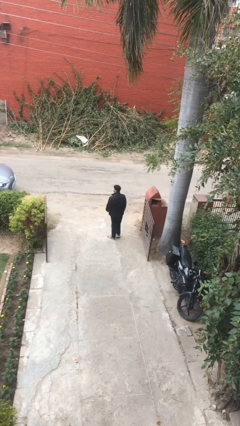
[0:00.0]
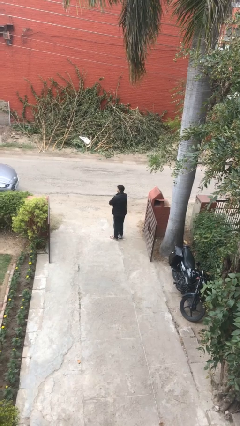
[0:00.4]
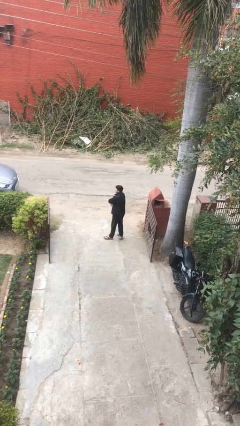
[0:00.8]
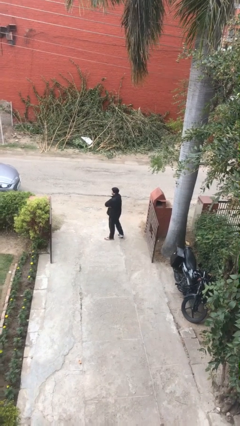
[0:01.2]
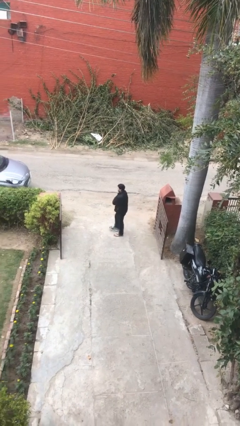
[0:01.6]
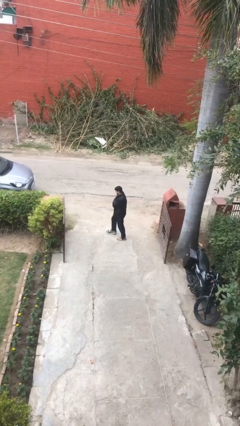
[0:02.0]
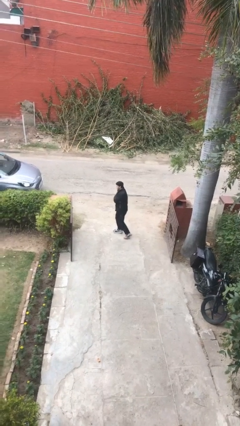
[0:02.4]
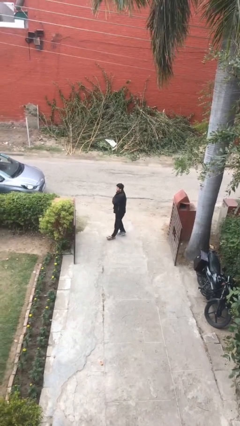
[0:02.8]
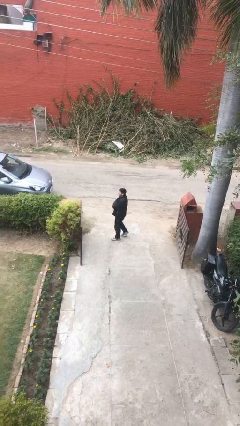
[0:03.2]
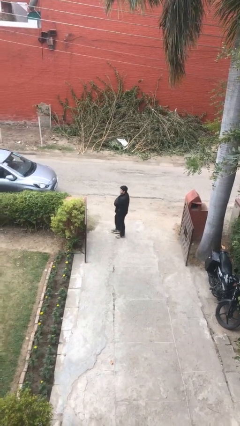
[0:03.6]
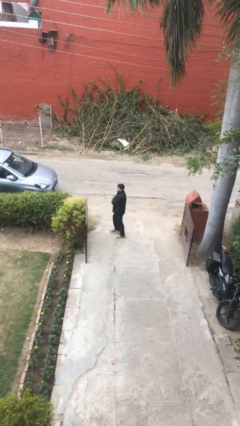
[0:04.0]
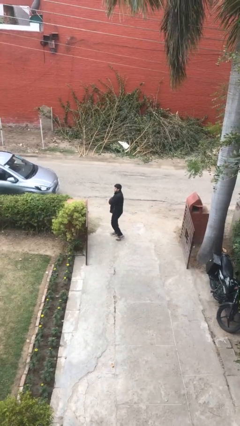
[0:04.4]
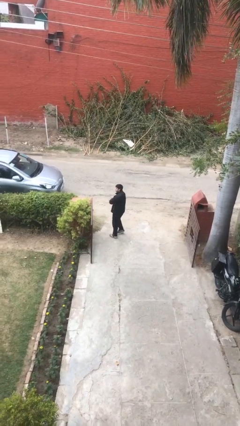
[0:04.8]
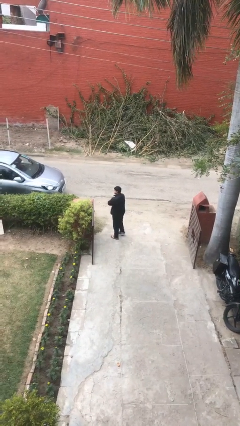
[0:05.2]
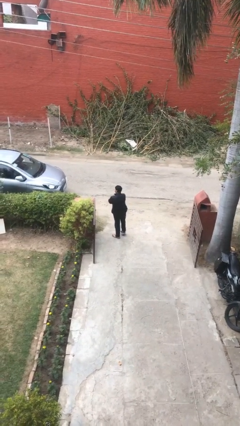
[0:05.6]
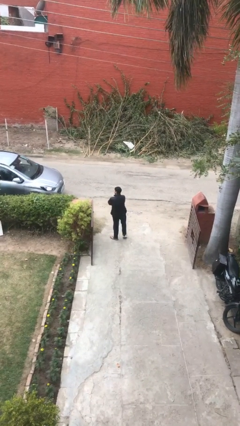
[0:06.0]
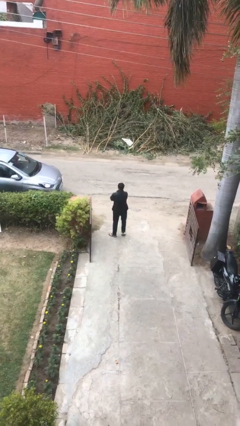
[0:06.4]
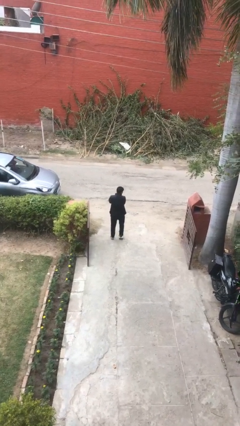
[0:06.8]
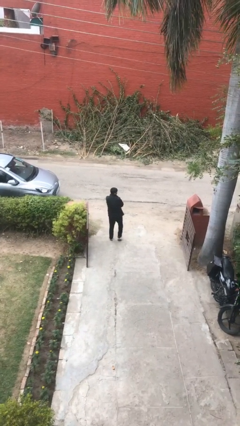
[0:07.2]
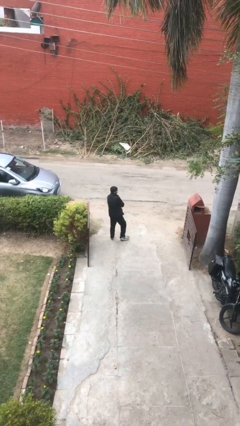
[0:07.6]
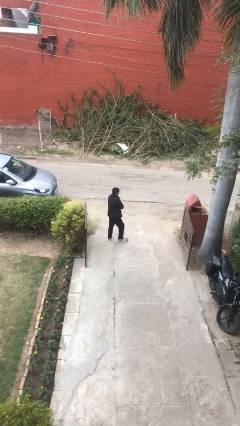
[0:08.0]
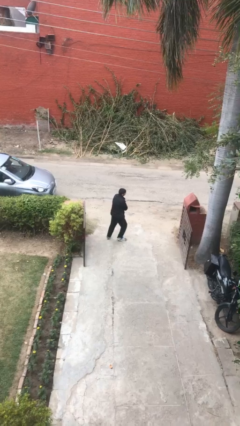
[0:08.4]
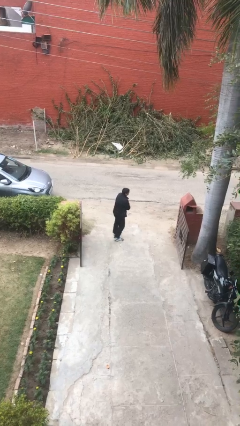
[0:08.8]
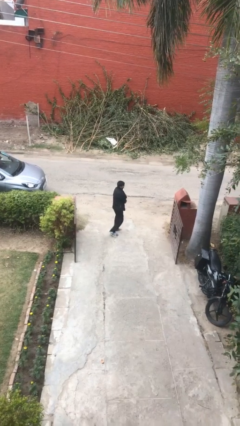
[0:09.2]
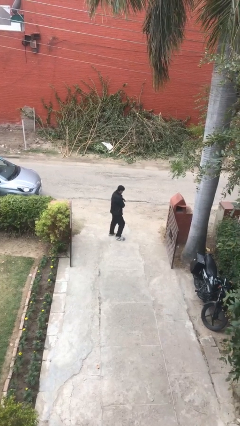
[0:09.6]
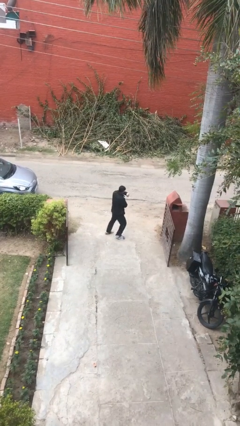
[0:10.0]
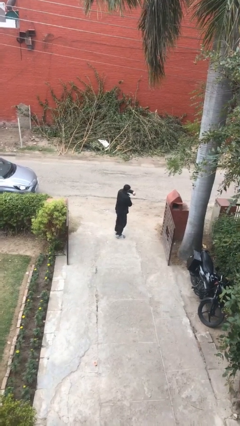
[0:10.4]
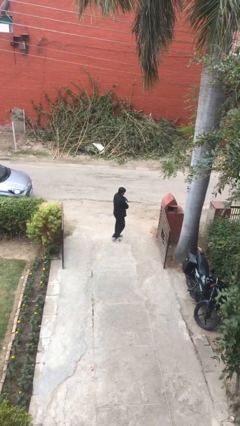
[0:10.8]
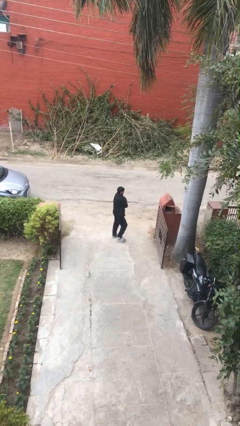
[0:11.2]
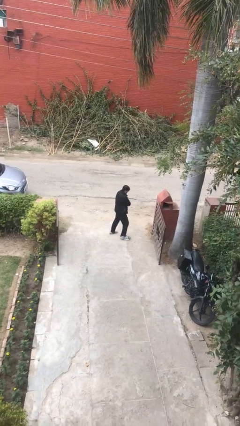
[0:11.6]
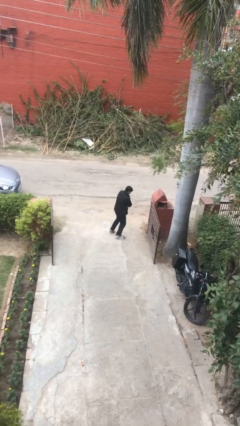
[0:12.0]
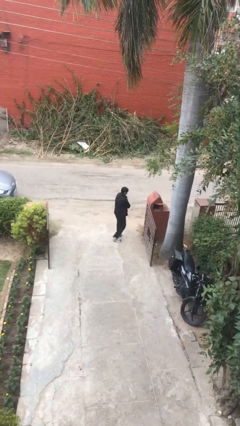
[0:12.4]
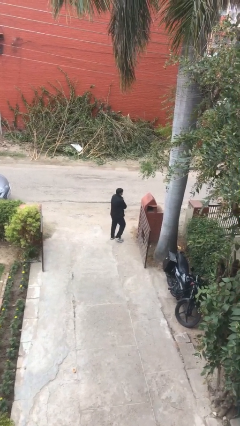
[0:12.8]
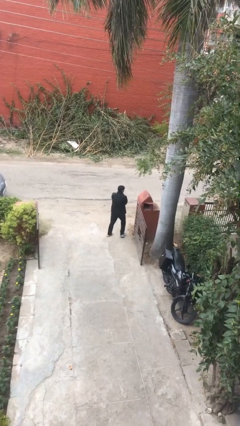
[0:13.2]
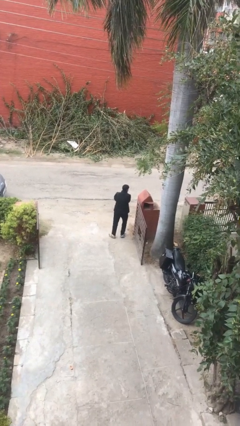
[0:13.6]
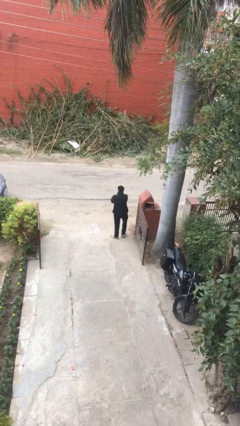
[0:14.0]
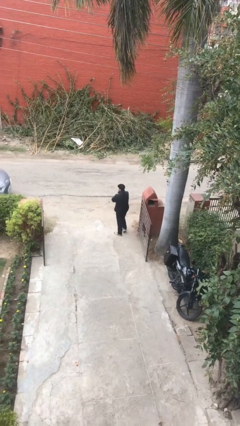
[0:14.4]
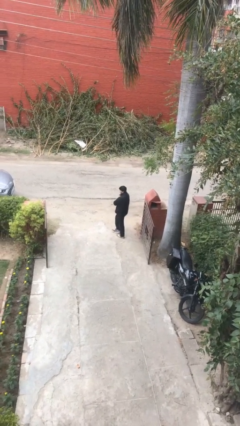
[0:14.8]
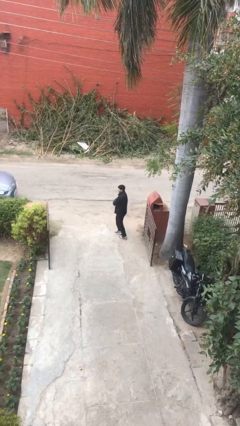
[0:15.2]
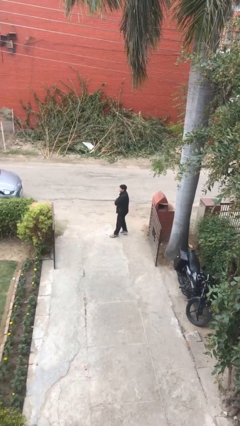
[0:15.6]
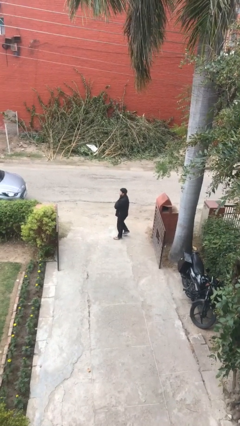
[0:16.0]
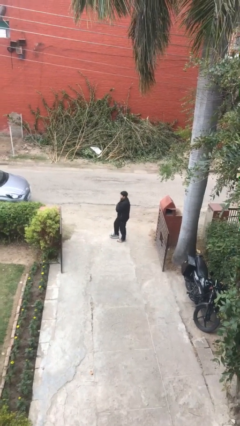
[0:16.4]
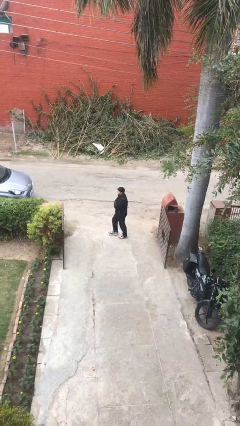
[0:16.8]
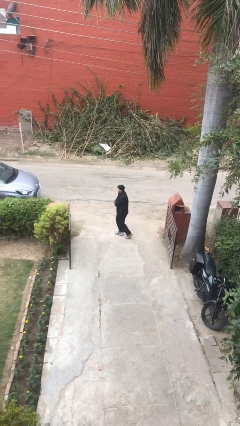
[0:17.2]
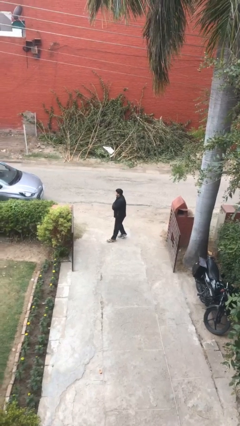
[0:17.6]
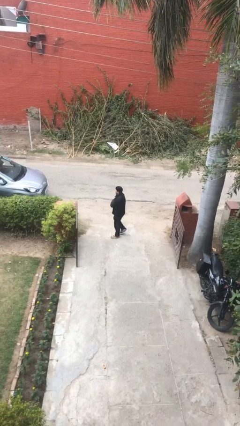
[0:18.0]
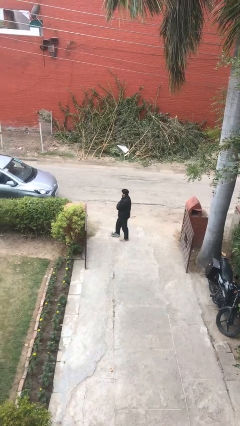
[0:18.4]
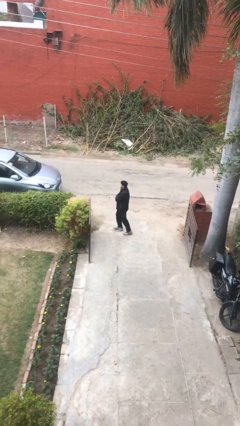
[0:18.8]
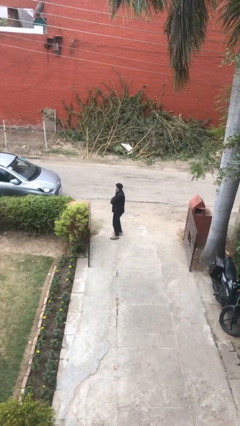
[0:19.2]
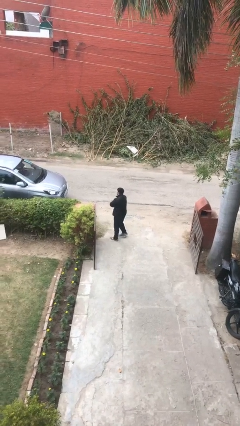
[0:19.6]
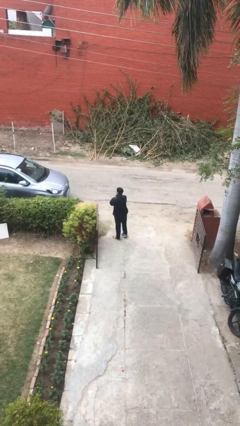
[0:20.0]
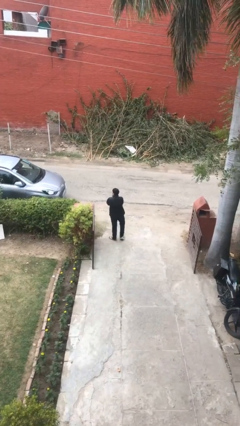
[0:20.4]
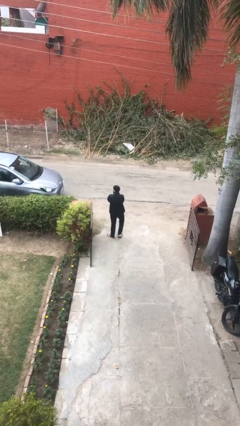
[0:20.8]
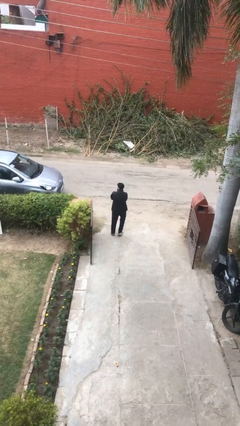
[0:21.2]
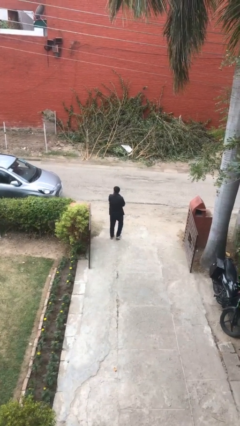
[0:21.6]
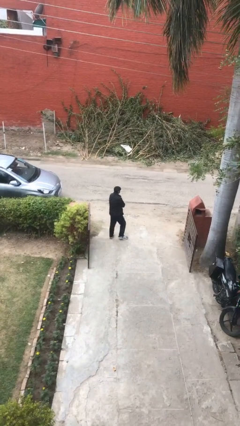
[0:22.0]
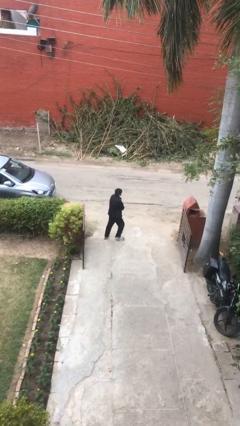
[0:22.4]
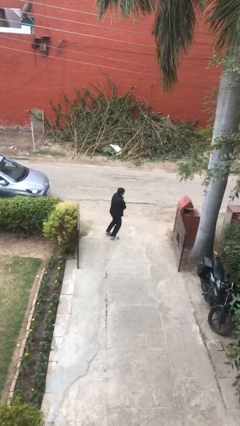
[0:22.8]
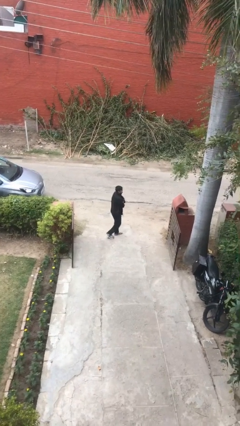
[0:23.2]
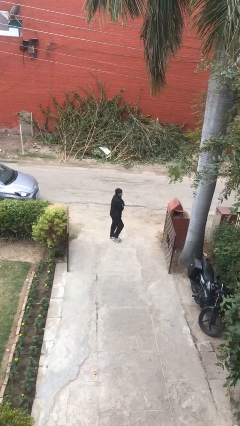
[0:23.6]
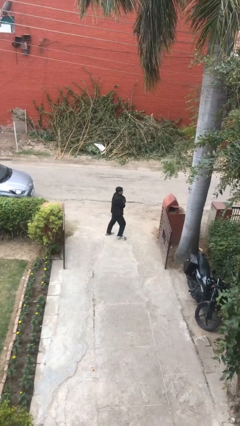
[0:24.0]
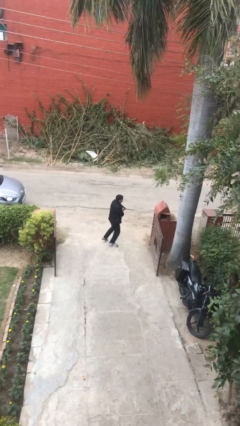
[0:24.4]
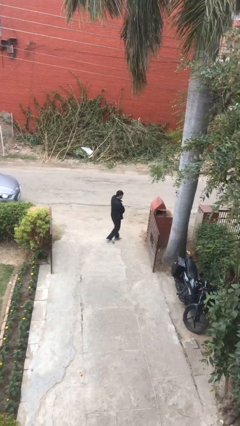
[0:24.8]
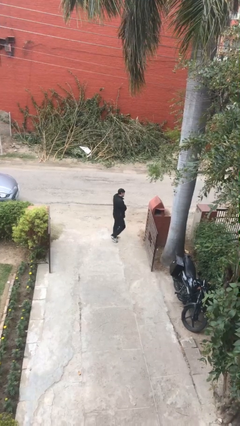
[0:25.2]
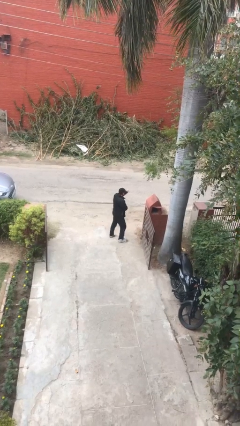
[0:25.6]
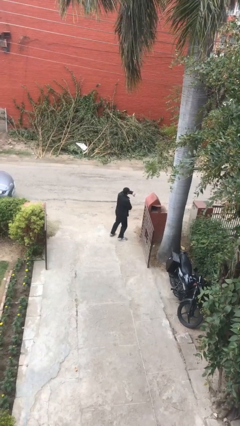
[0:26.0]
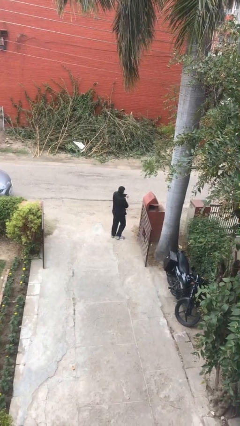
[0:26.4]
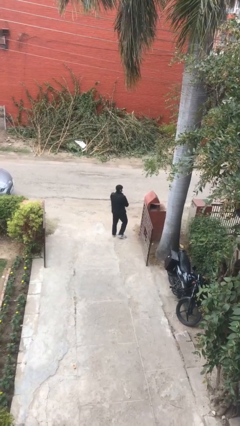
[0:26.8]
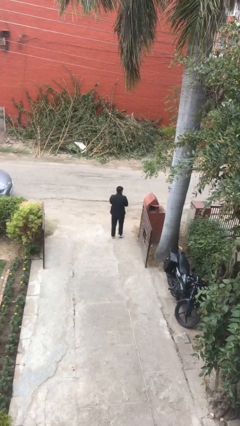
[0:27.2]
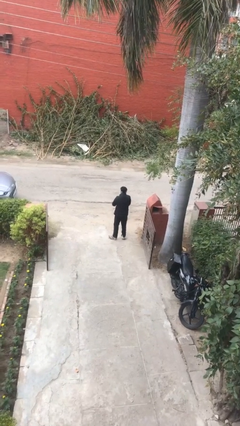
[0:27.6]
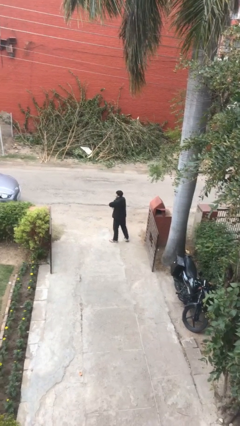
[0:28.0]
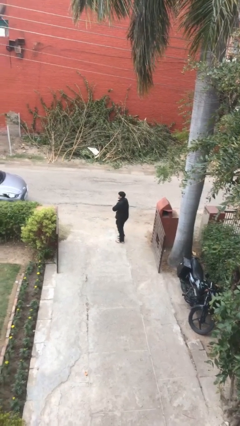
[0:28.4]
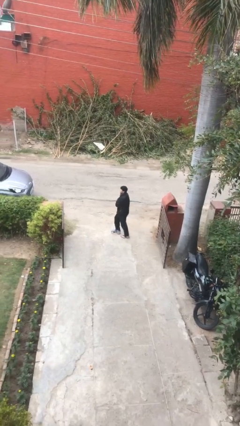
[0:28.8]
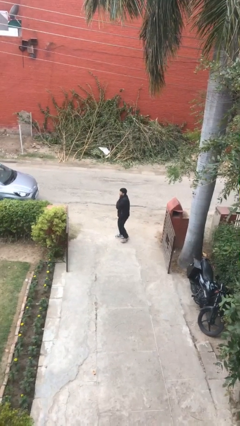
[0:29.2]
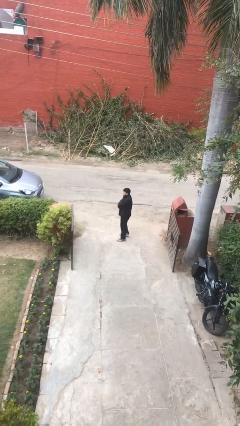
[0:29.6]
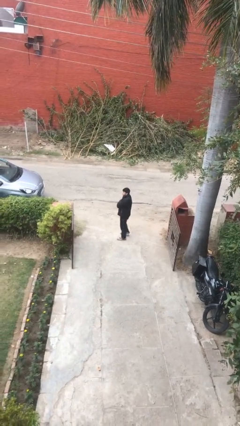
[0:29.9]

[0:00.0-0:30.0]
person walks

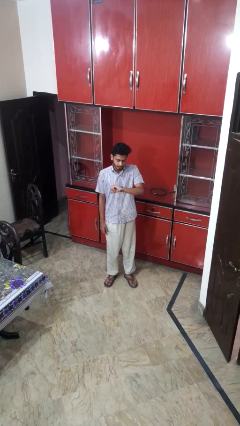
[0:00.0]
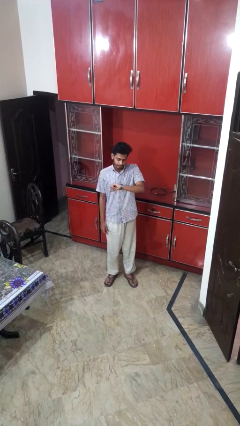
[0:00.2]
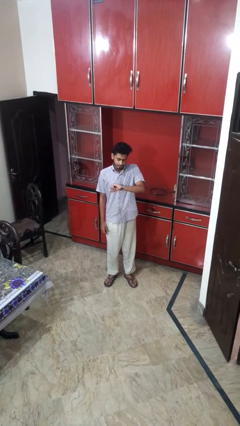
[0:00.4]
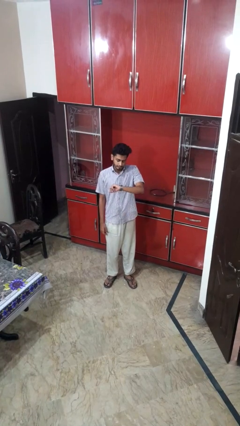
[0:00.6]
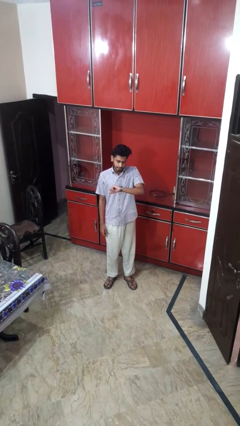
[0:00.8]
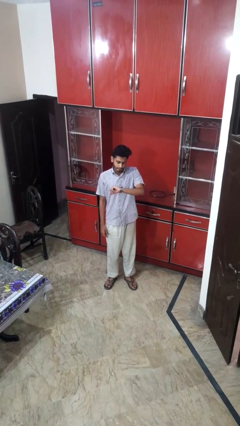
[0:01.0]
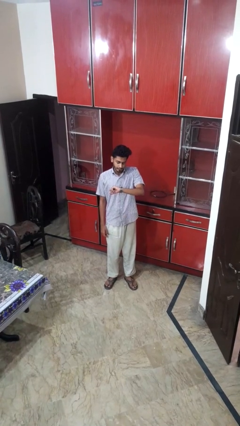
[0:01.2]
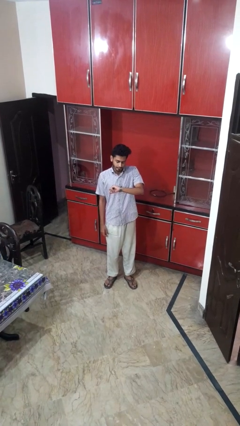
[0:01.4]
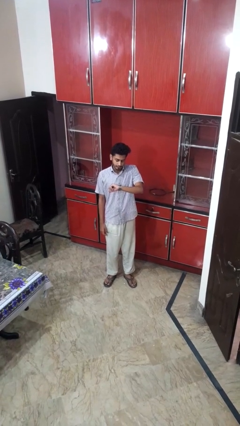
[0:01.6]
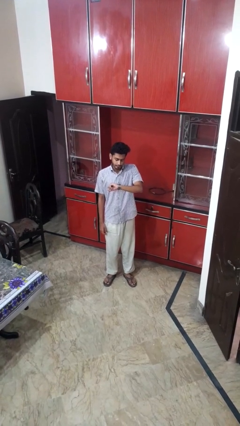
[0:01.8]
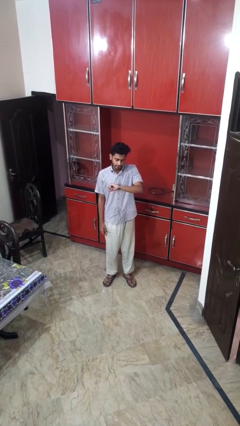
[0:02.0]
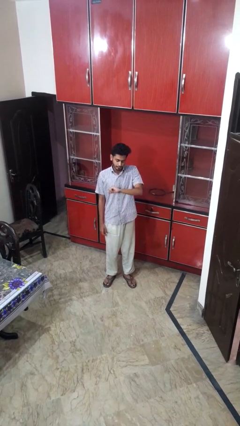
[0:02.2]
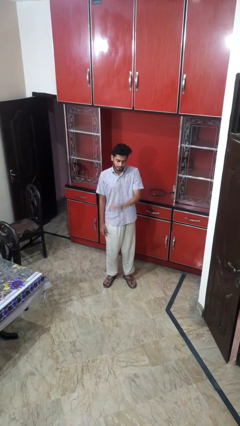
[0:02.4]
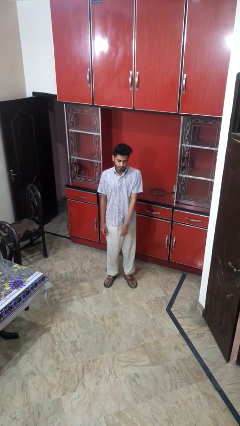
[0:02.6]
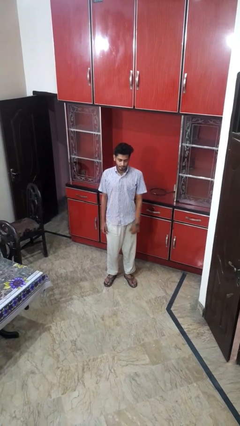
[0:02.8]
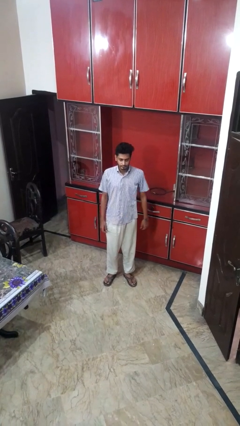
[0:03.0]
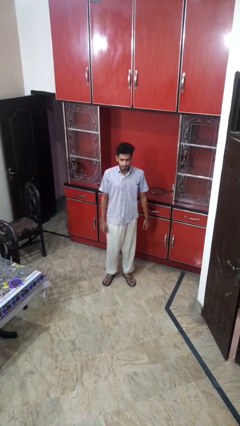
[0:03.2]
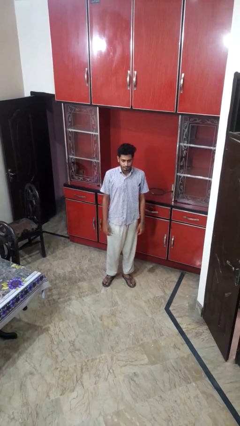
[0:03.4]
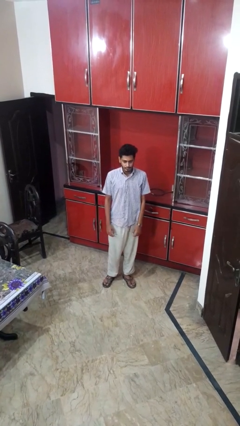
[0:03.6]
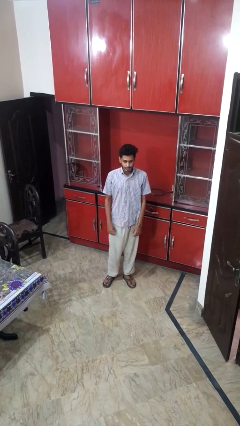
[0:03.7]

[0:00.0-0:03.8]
person stands up from floor
